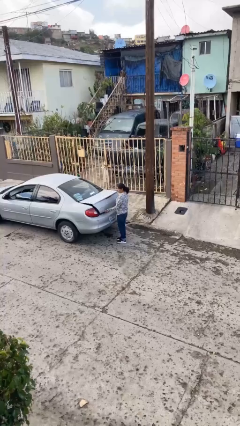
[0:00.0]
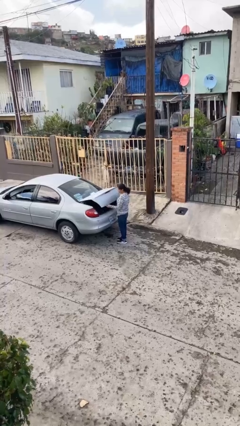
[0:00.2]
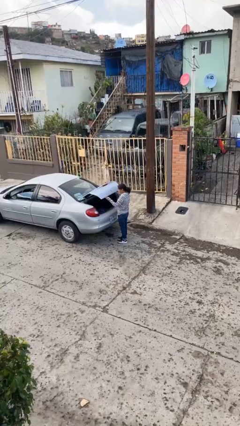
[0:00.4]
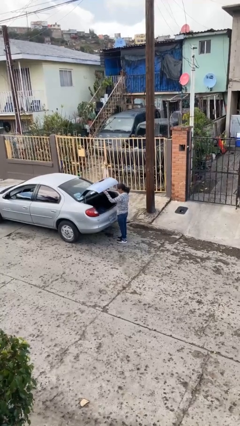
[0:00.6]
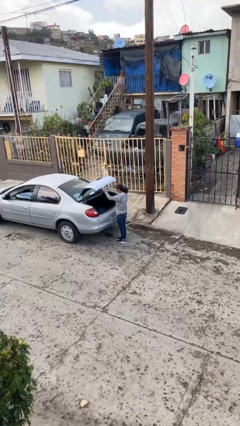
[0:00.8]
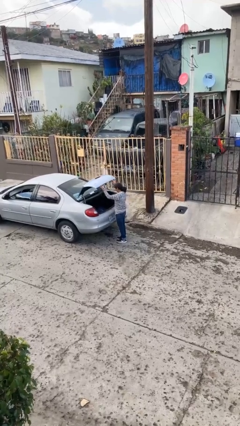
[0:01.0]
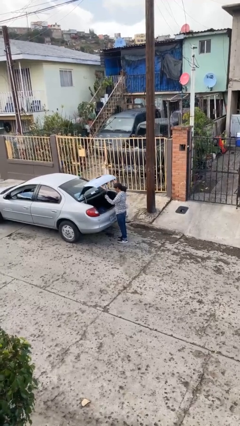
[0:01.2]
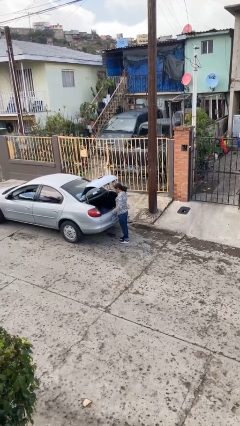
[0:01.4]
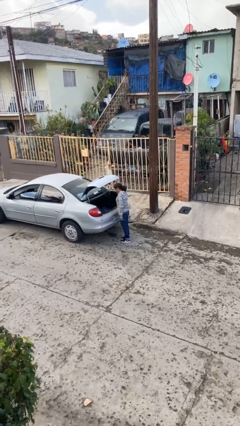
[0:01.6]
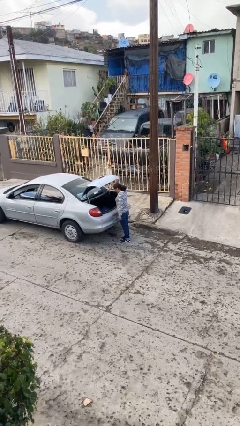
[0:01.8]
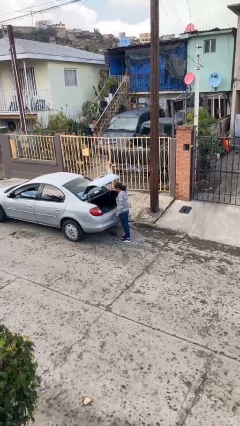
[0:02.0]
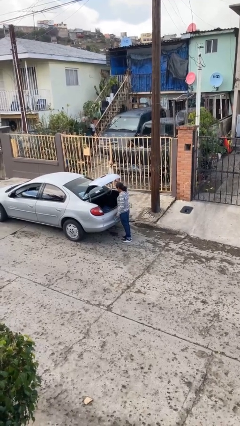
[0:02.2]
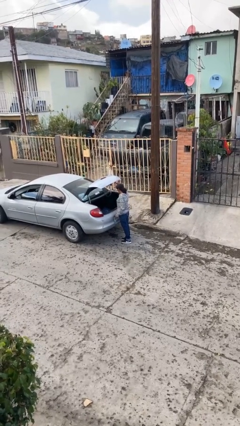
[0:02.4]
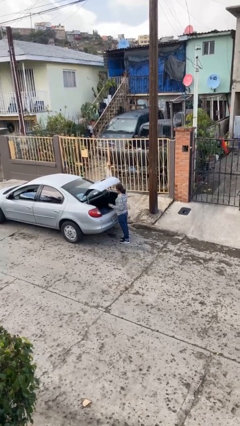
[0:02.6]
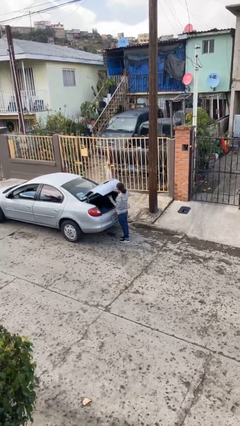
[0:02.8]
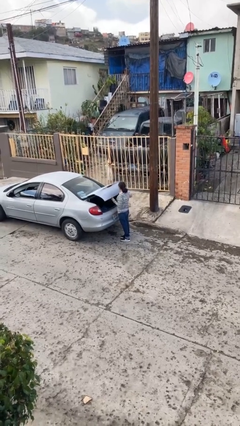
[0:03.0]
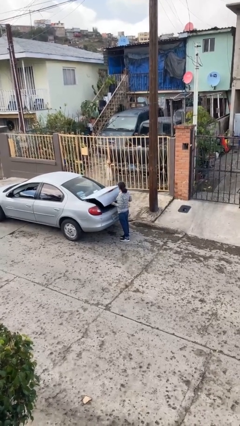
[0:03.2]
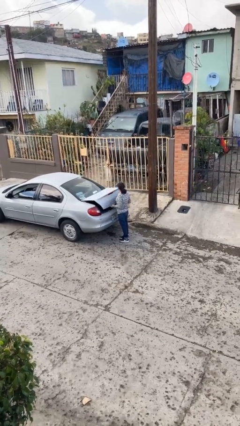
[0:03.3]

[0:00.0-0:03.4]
person opens car trunk

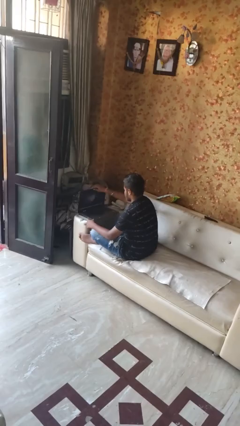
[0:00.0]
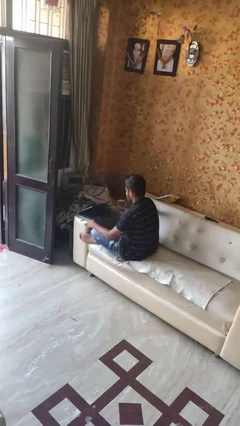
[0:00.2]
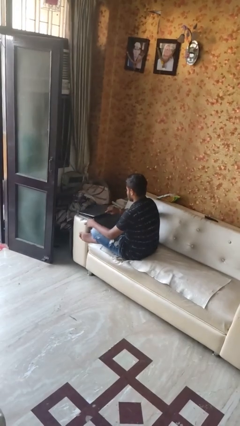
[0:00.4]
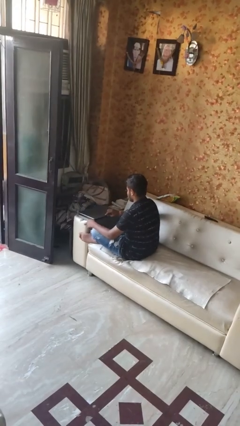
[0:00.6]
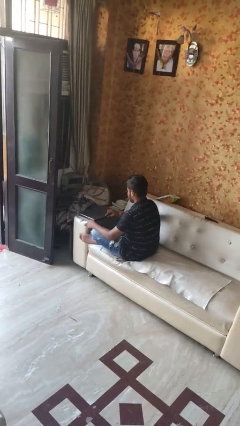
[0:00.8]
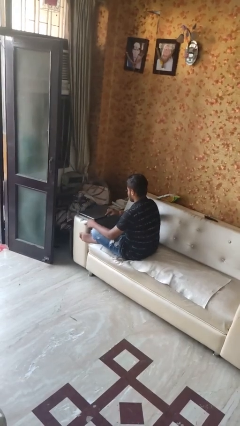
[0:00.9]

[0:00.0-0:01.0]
person closes laptop

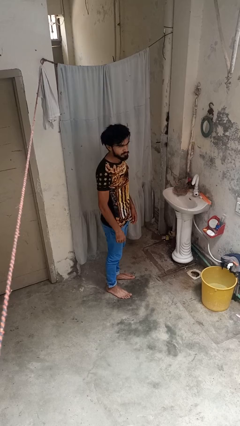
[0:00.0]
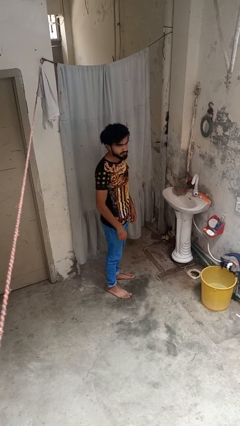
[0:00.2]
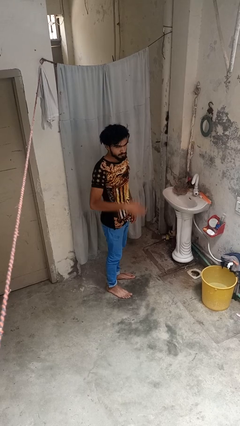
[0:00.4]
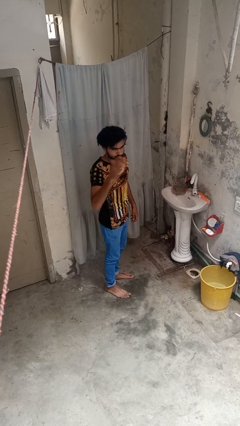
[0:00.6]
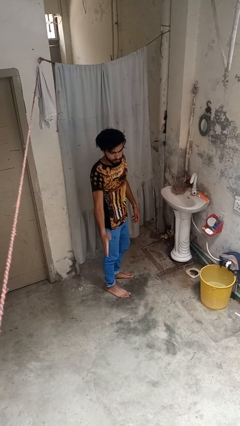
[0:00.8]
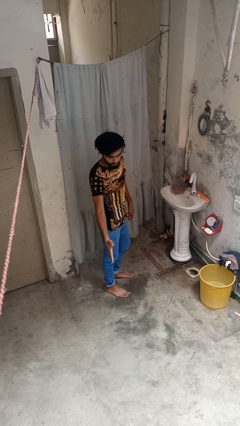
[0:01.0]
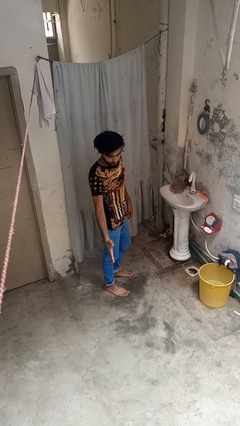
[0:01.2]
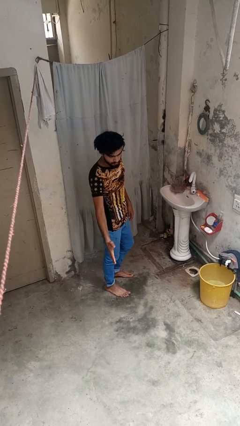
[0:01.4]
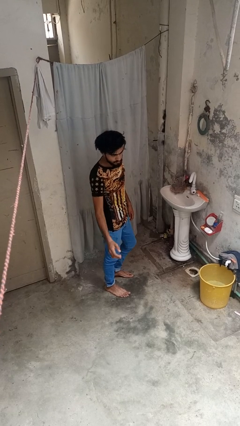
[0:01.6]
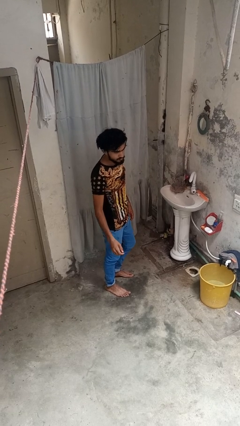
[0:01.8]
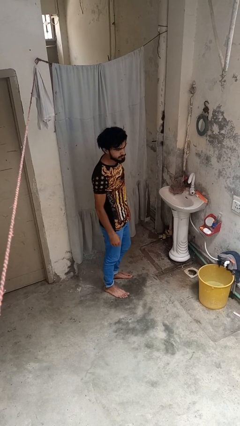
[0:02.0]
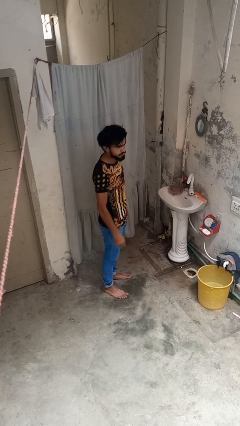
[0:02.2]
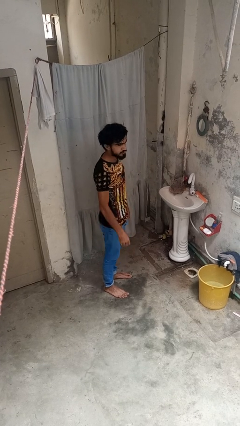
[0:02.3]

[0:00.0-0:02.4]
person karate chop

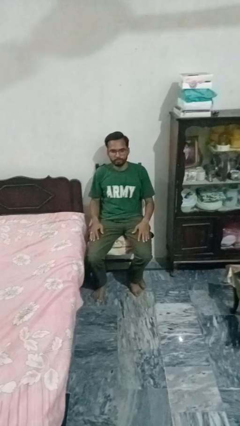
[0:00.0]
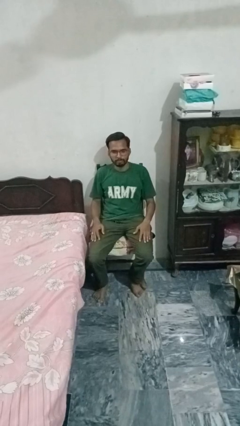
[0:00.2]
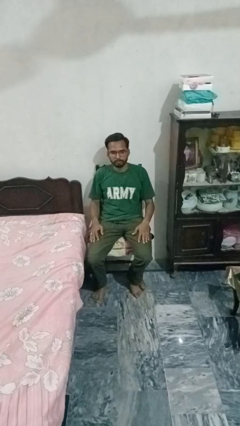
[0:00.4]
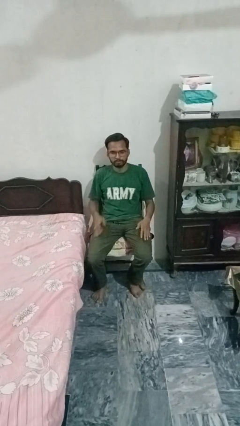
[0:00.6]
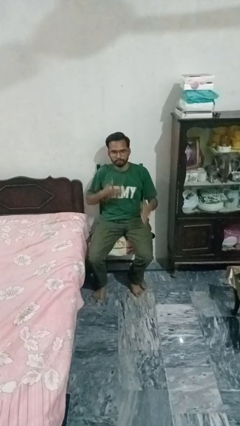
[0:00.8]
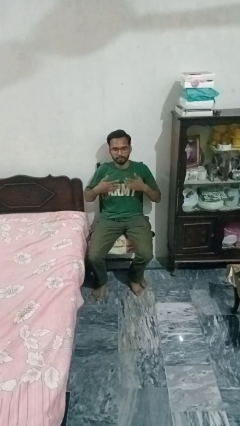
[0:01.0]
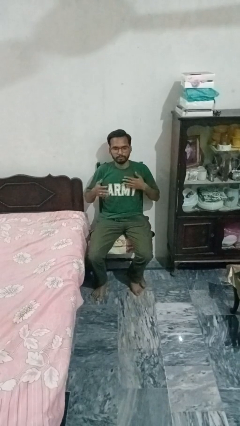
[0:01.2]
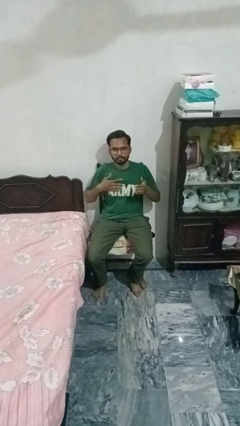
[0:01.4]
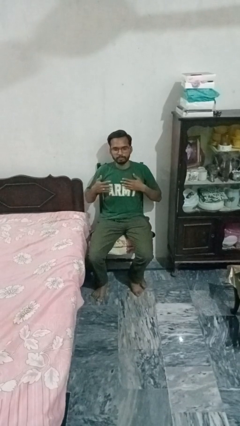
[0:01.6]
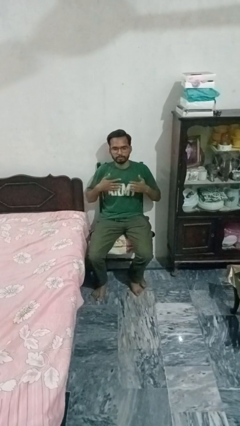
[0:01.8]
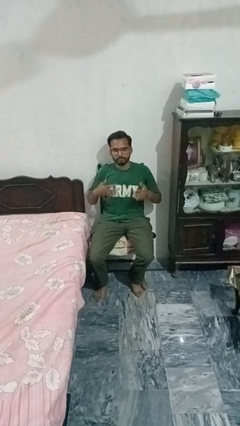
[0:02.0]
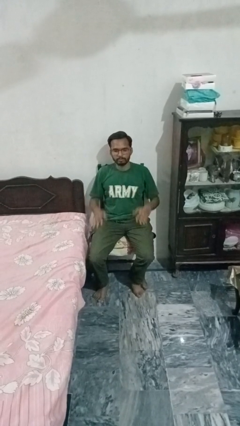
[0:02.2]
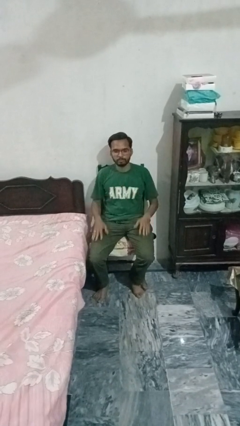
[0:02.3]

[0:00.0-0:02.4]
person drums on chest

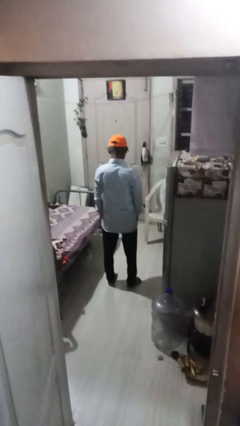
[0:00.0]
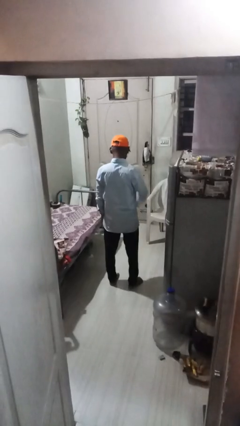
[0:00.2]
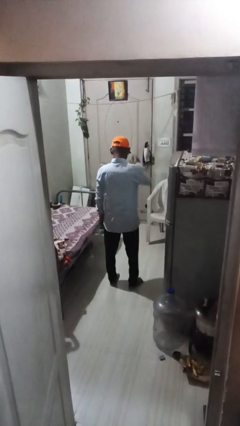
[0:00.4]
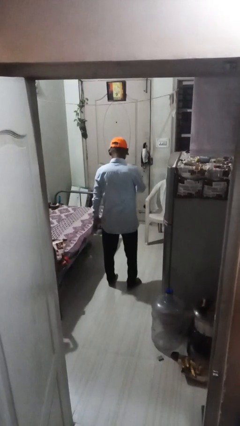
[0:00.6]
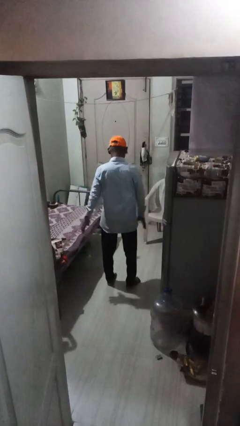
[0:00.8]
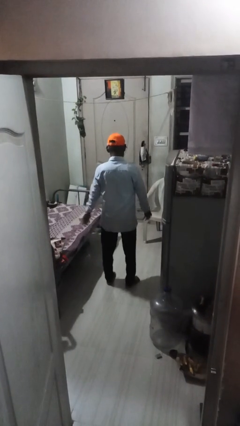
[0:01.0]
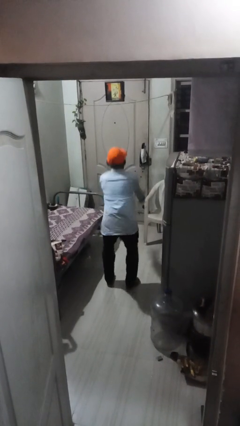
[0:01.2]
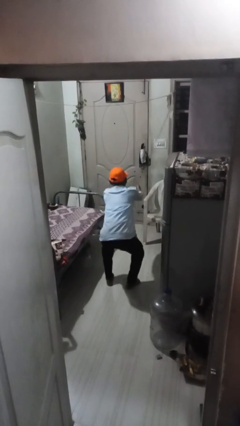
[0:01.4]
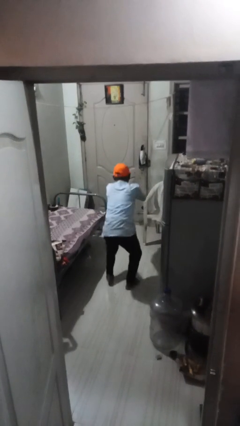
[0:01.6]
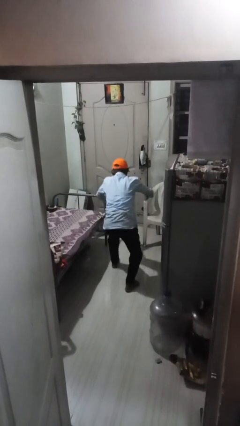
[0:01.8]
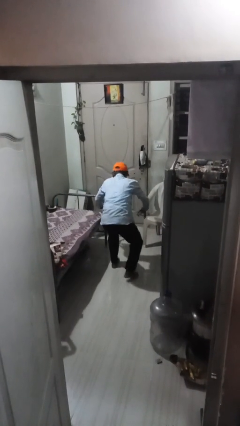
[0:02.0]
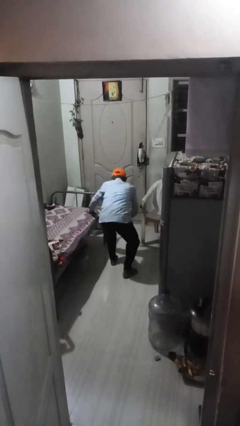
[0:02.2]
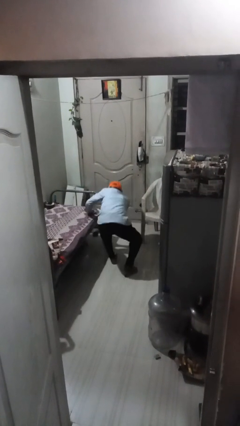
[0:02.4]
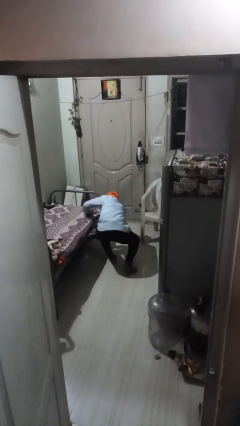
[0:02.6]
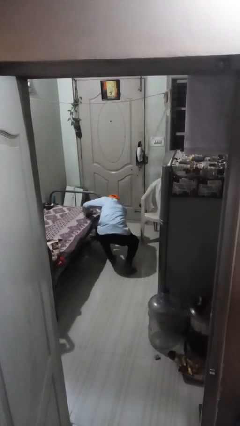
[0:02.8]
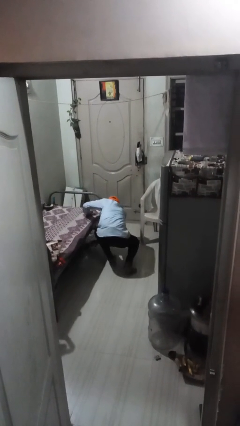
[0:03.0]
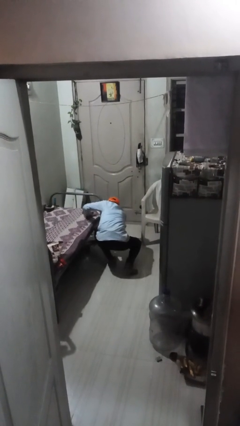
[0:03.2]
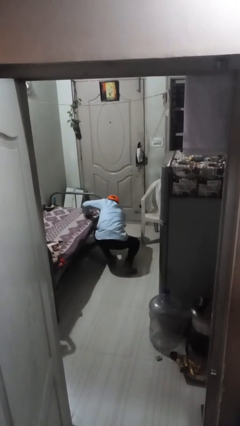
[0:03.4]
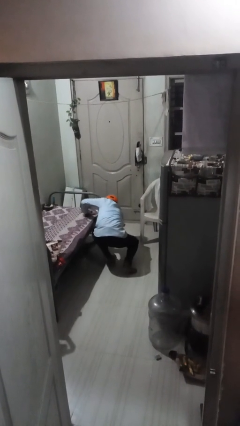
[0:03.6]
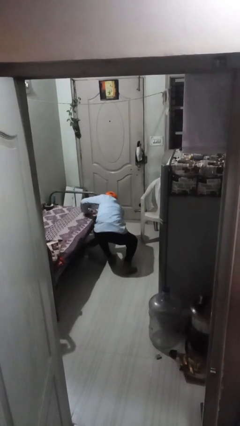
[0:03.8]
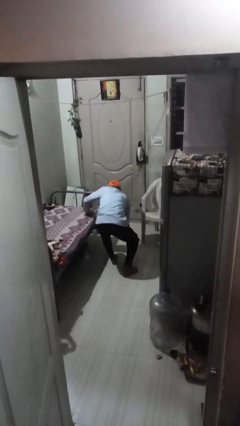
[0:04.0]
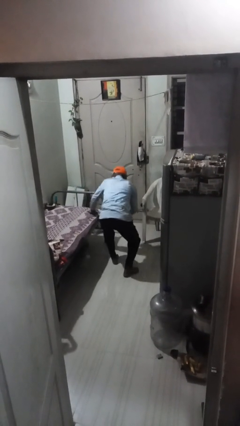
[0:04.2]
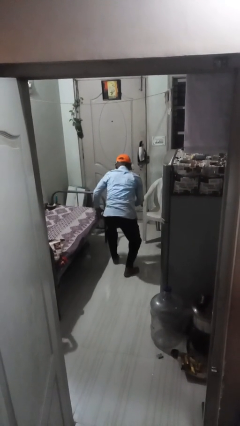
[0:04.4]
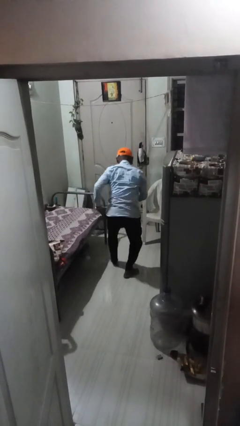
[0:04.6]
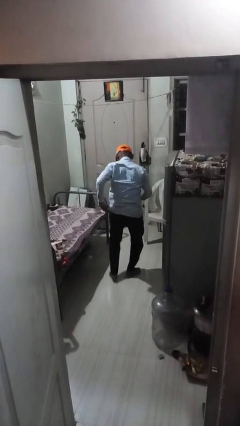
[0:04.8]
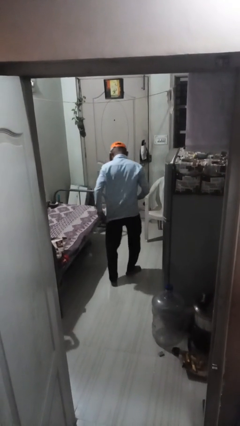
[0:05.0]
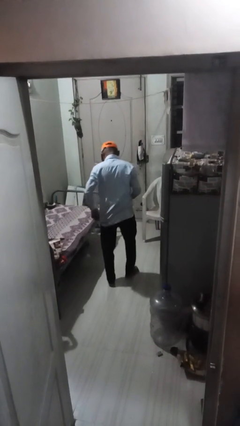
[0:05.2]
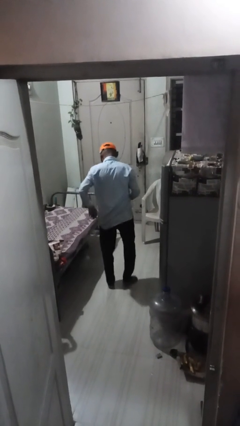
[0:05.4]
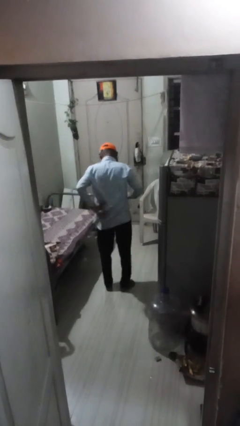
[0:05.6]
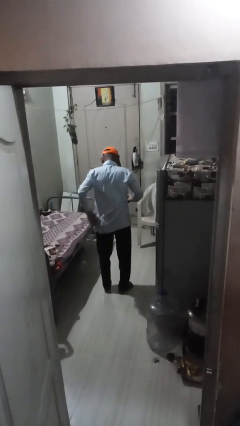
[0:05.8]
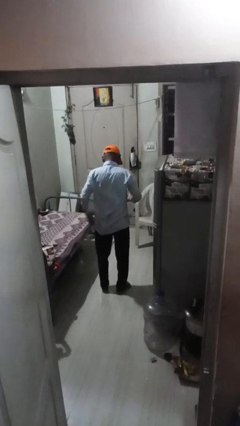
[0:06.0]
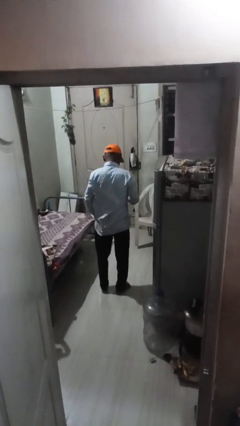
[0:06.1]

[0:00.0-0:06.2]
person bounces ball on floor

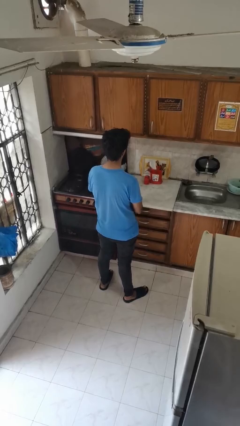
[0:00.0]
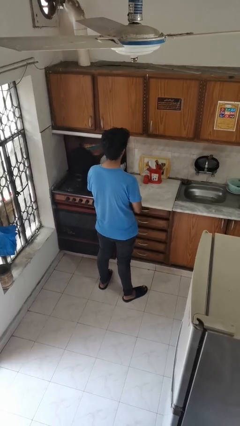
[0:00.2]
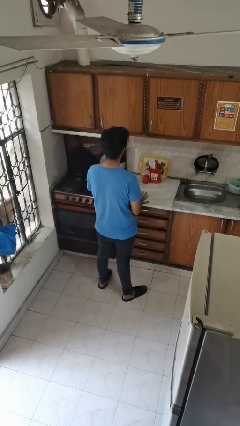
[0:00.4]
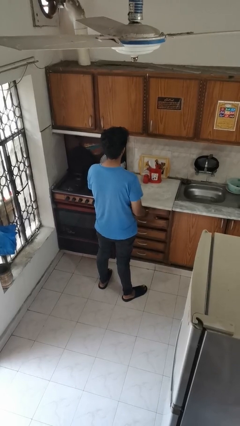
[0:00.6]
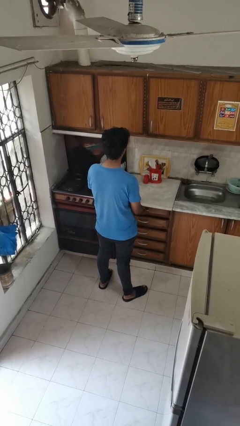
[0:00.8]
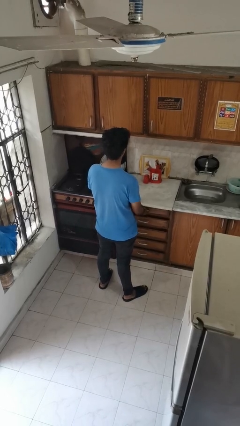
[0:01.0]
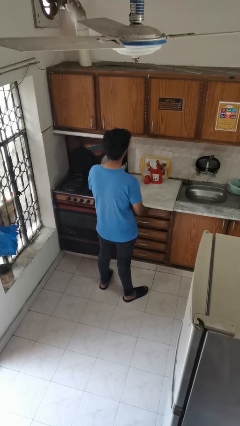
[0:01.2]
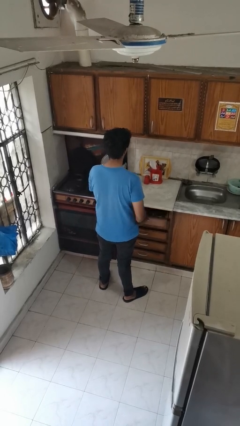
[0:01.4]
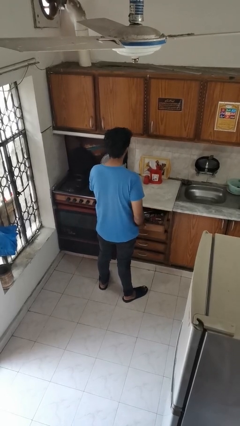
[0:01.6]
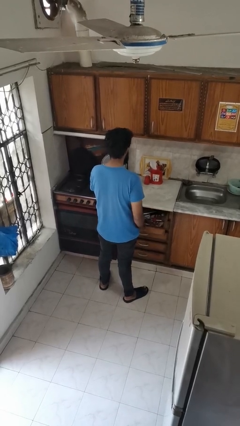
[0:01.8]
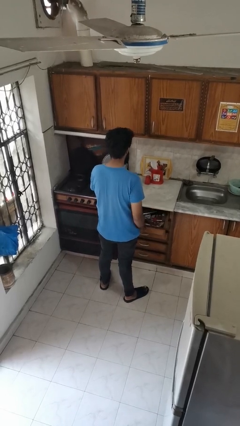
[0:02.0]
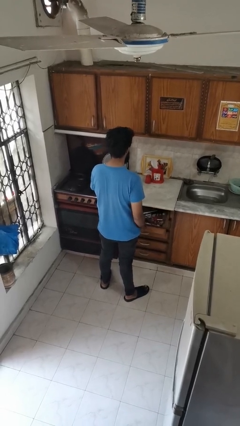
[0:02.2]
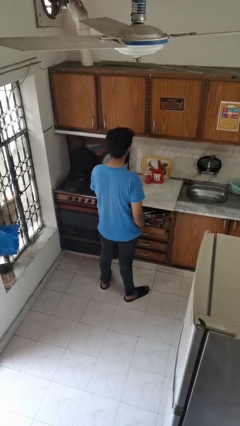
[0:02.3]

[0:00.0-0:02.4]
person opens kitchen drawer
